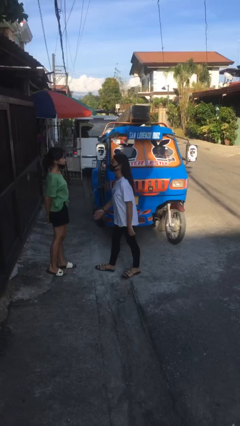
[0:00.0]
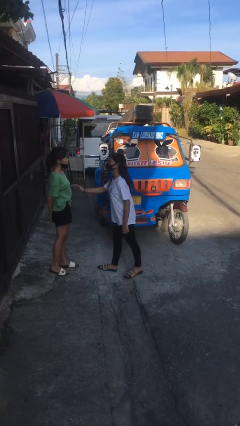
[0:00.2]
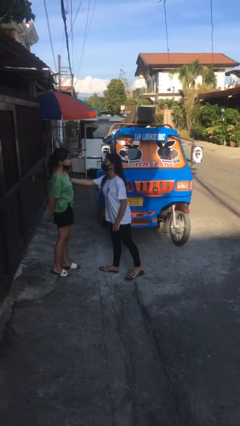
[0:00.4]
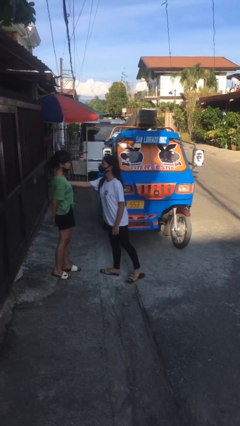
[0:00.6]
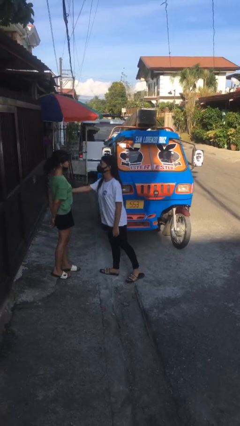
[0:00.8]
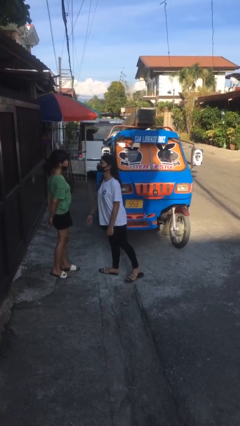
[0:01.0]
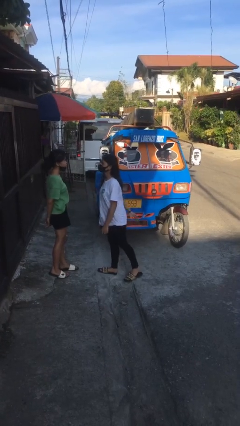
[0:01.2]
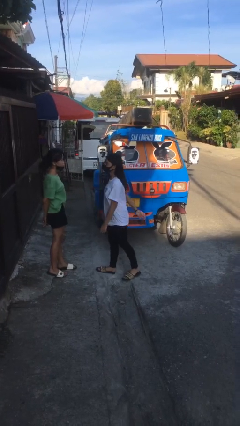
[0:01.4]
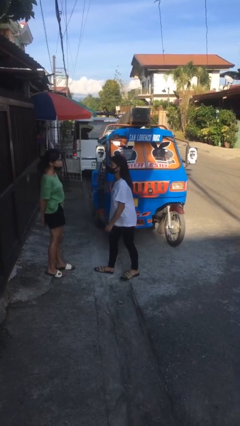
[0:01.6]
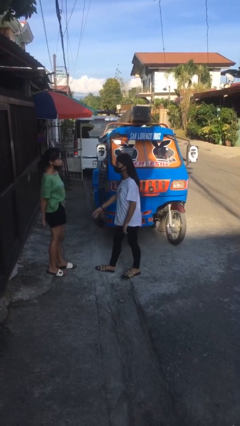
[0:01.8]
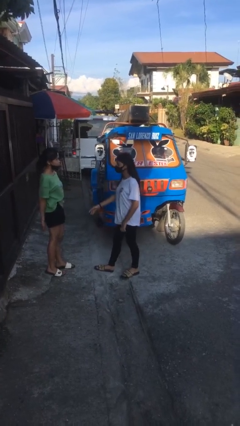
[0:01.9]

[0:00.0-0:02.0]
person shoves person

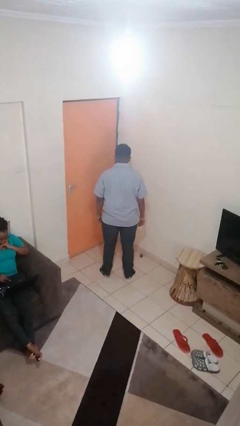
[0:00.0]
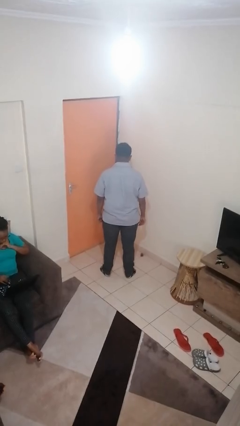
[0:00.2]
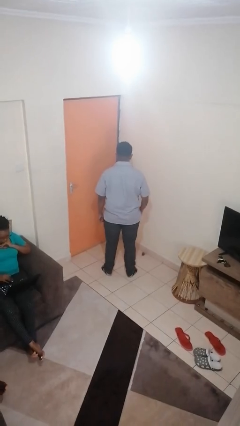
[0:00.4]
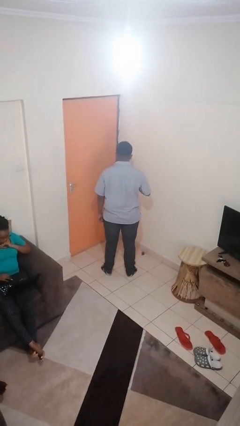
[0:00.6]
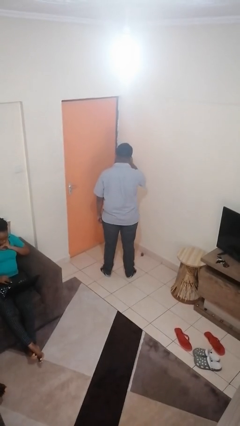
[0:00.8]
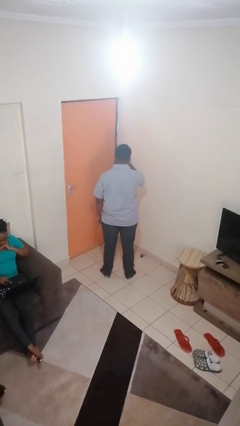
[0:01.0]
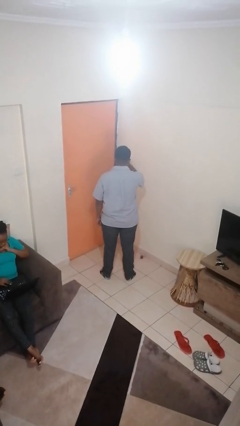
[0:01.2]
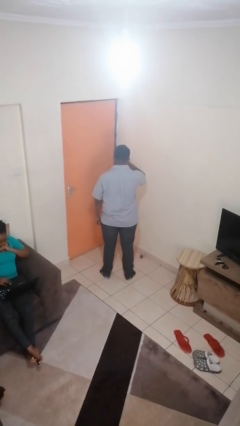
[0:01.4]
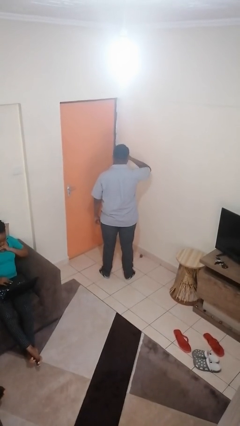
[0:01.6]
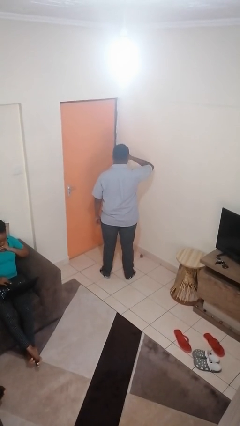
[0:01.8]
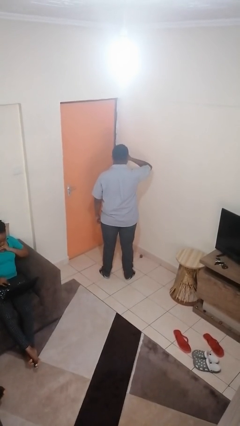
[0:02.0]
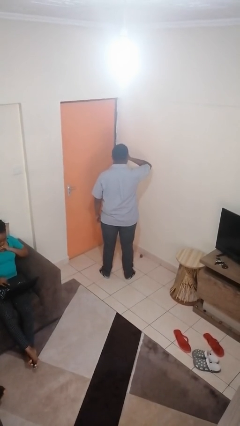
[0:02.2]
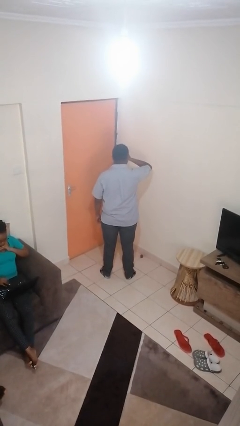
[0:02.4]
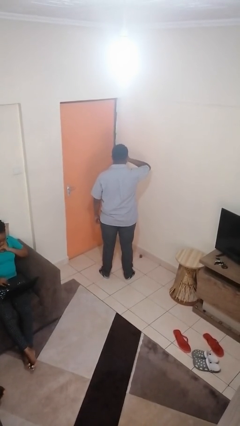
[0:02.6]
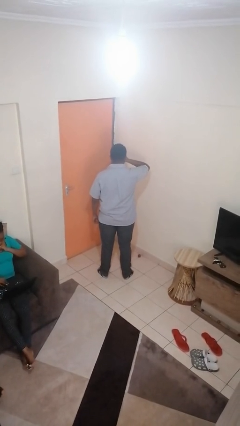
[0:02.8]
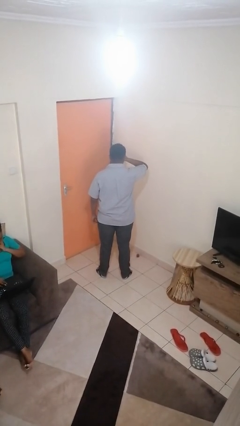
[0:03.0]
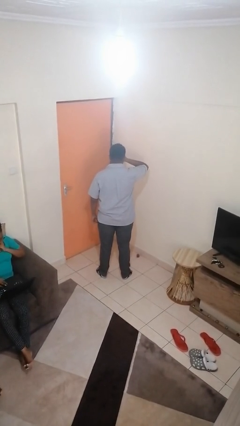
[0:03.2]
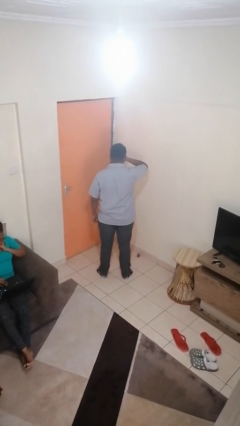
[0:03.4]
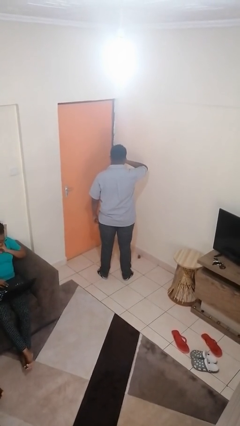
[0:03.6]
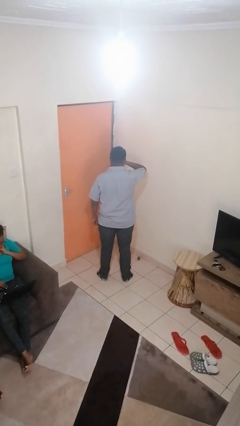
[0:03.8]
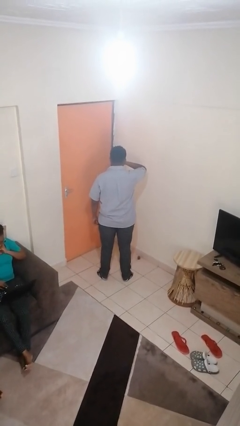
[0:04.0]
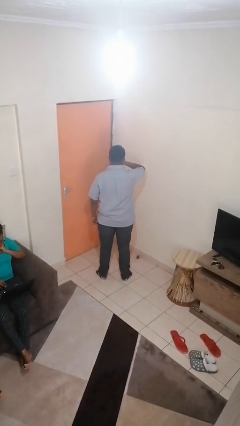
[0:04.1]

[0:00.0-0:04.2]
person scratches face

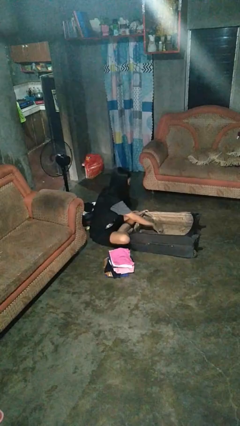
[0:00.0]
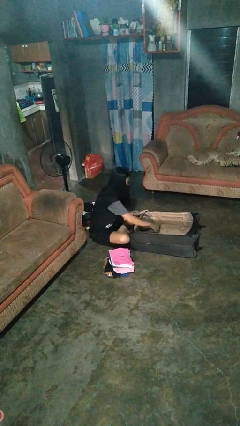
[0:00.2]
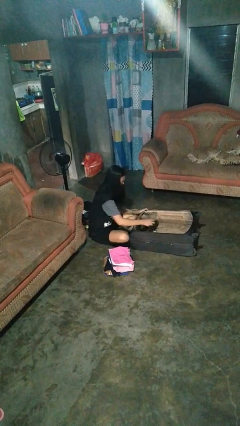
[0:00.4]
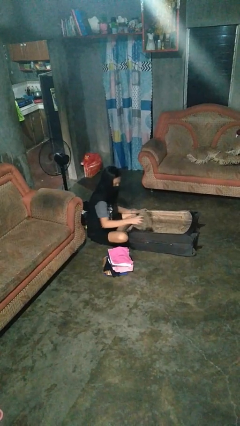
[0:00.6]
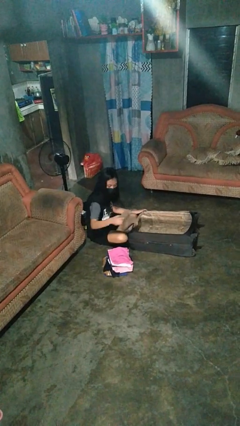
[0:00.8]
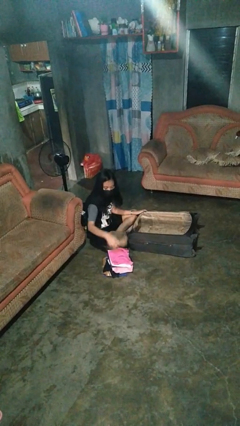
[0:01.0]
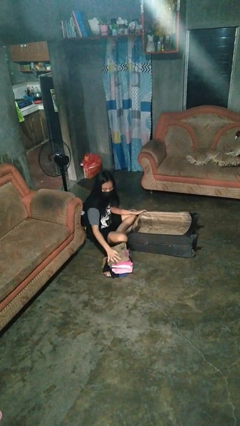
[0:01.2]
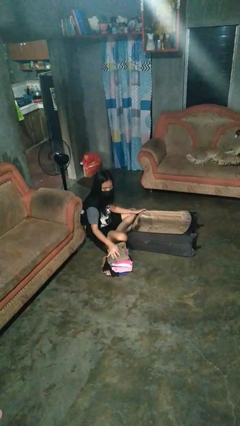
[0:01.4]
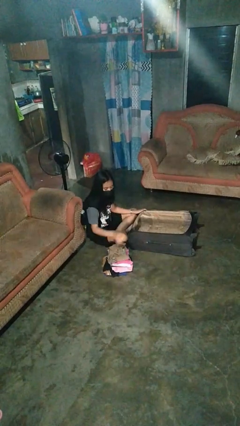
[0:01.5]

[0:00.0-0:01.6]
person unloads clothes from suitcase

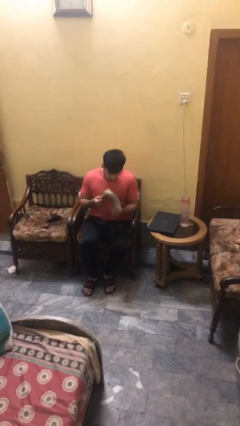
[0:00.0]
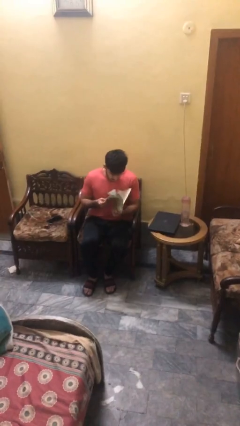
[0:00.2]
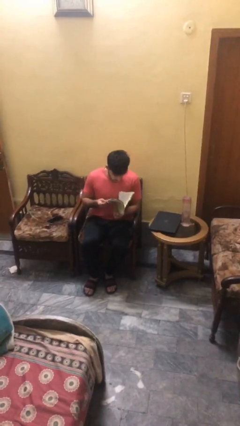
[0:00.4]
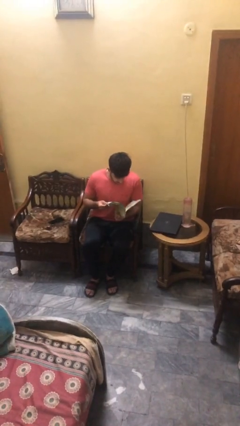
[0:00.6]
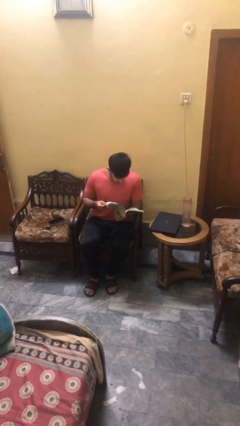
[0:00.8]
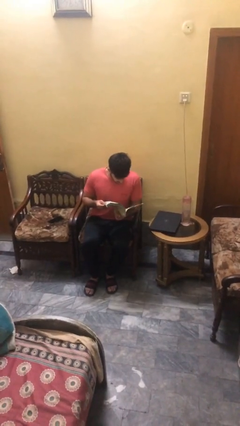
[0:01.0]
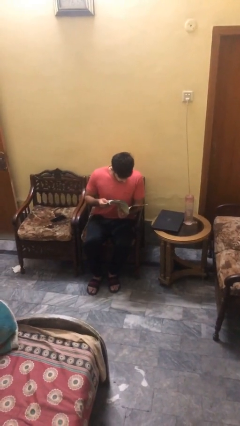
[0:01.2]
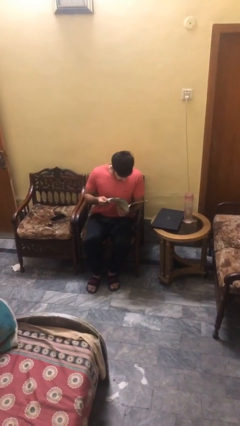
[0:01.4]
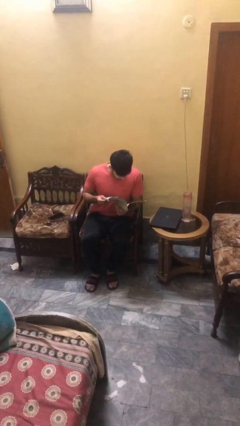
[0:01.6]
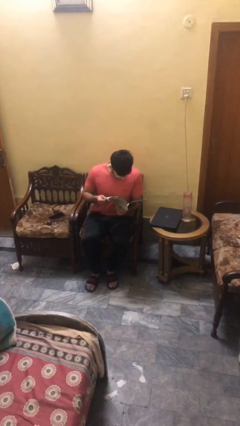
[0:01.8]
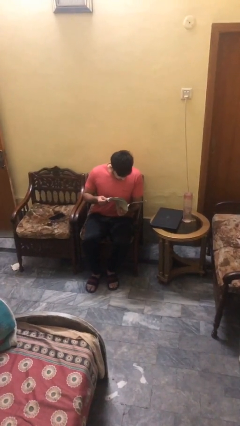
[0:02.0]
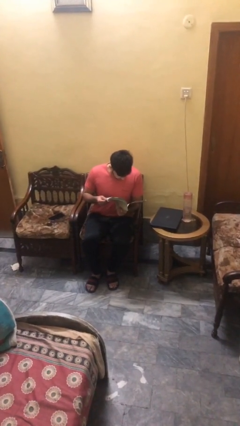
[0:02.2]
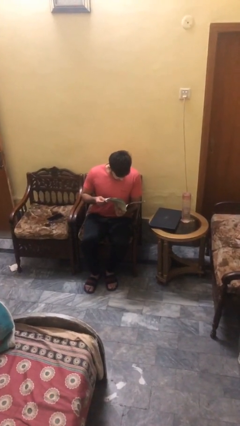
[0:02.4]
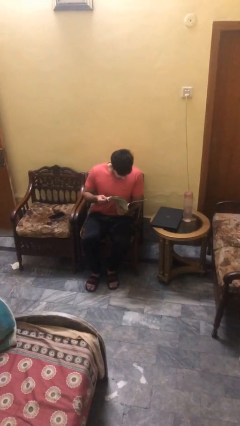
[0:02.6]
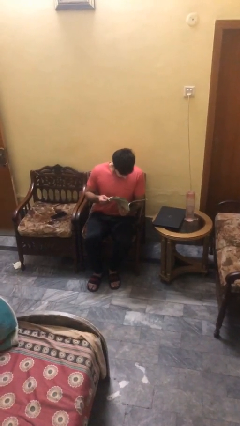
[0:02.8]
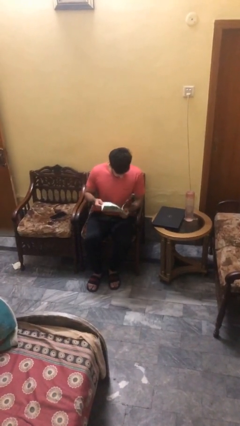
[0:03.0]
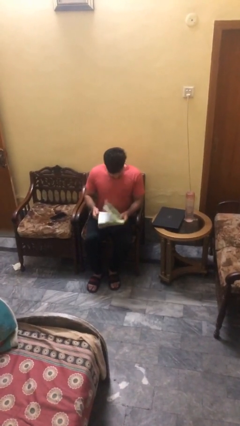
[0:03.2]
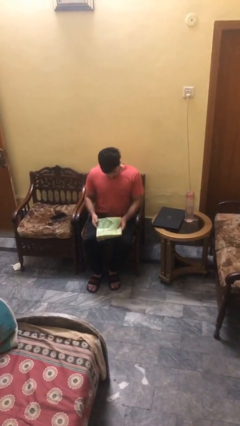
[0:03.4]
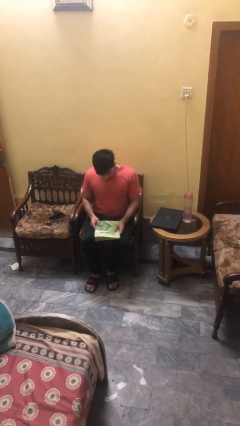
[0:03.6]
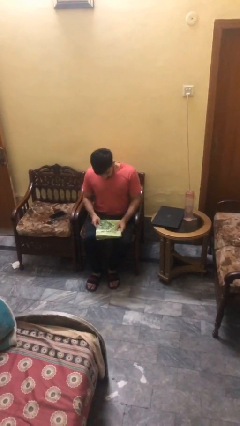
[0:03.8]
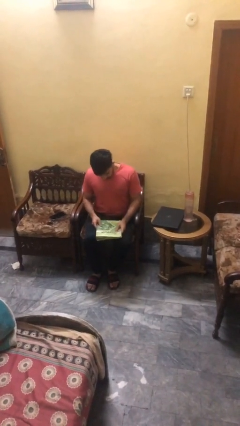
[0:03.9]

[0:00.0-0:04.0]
person reads document

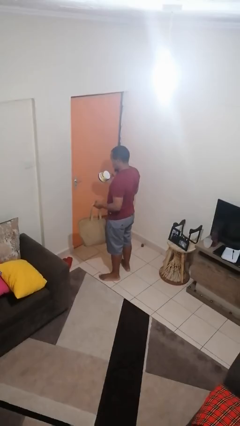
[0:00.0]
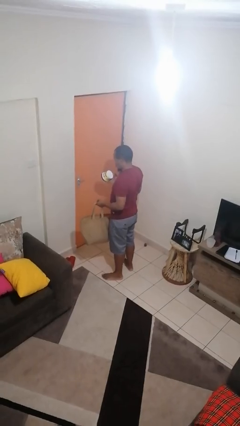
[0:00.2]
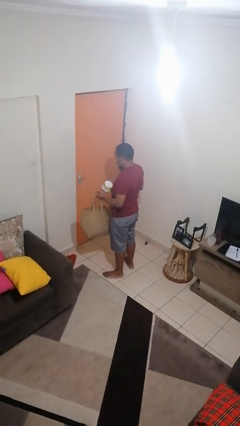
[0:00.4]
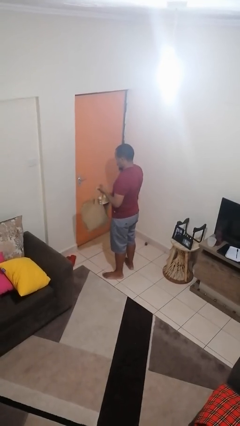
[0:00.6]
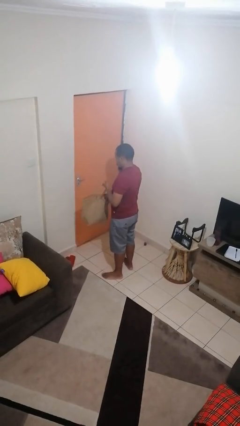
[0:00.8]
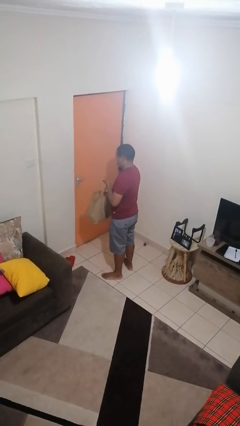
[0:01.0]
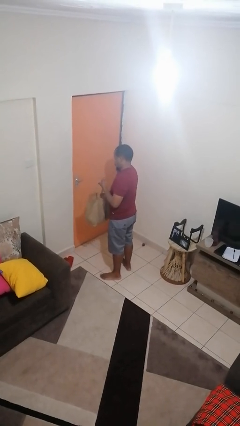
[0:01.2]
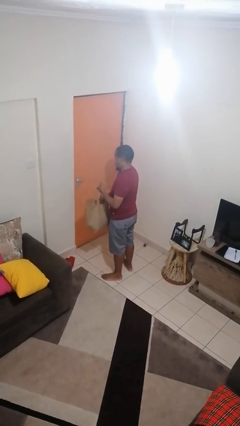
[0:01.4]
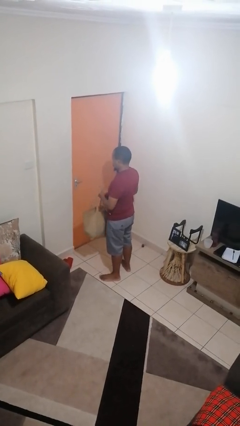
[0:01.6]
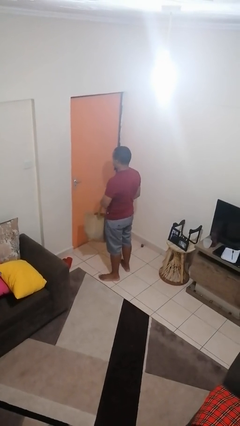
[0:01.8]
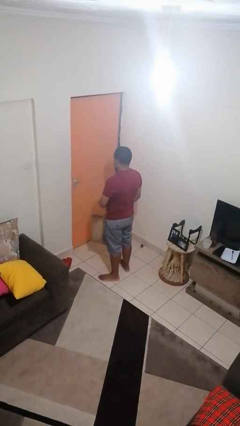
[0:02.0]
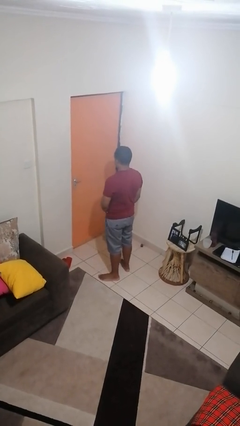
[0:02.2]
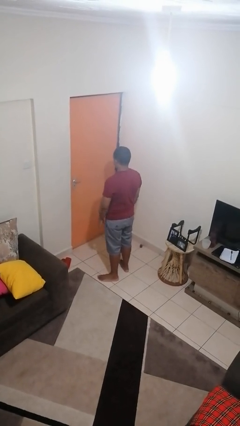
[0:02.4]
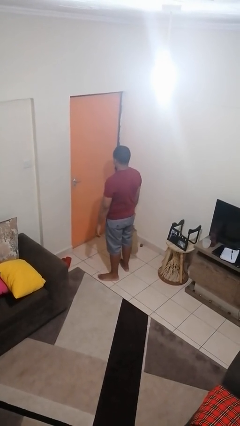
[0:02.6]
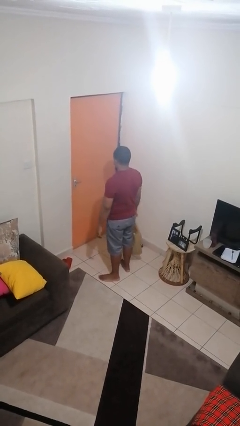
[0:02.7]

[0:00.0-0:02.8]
person puts object into bag

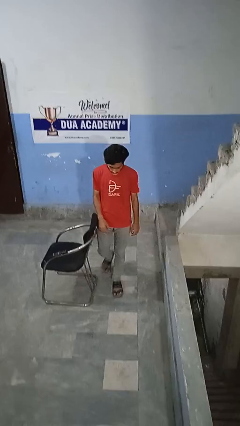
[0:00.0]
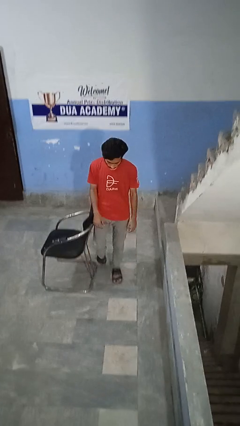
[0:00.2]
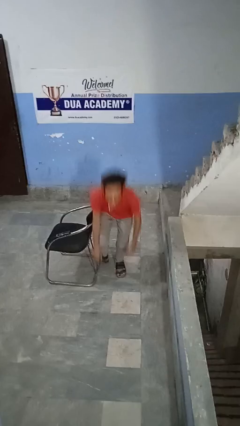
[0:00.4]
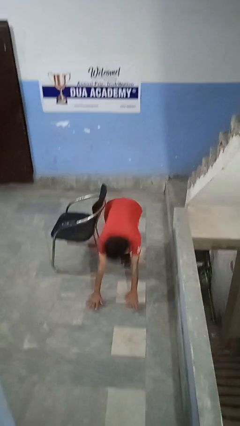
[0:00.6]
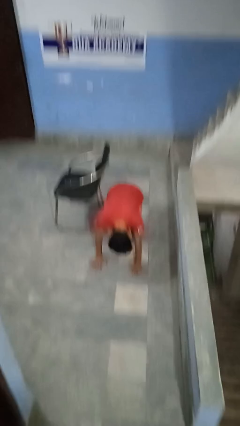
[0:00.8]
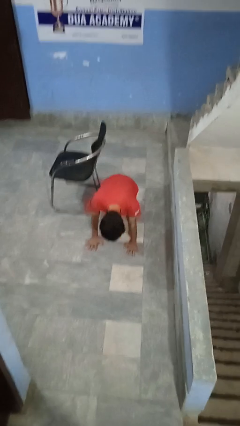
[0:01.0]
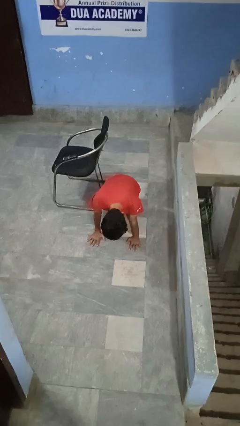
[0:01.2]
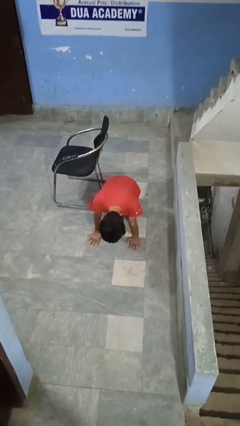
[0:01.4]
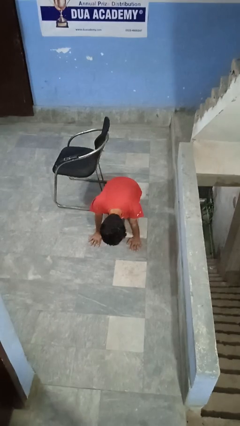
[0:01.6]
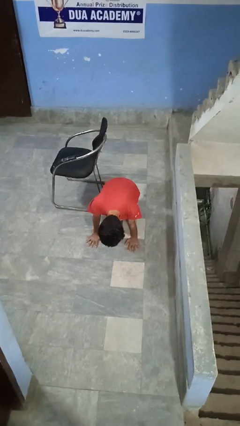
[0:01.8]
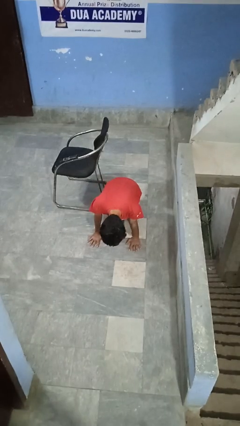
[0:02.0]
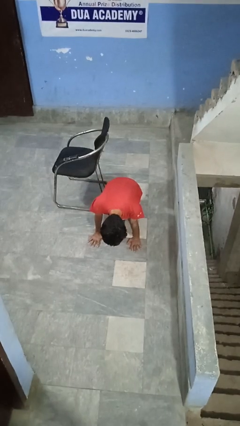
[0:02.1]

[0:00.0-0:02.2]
person trips on object on floor

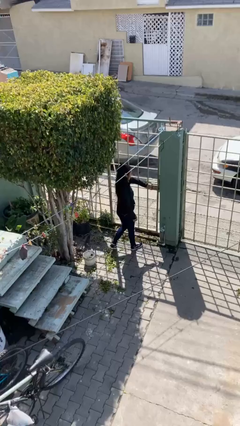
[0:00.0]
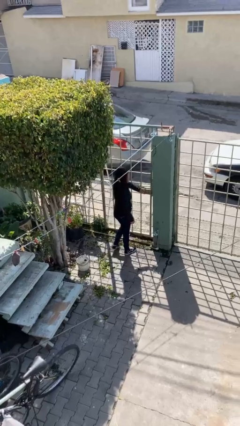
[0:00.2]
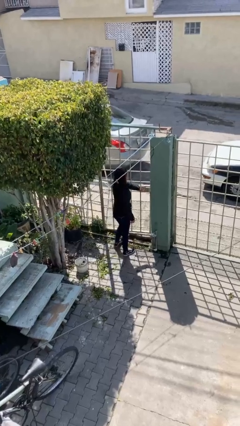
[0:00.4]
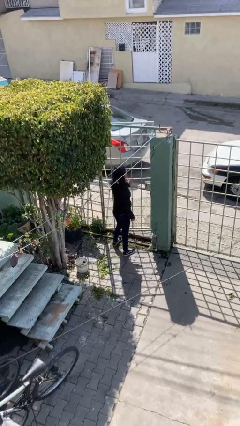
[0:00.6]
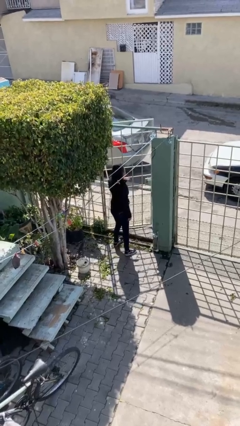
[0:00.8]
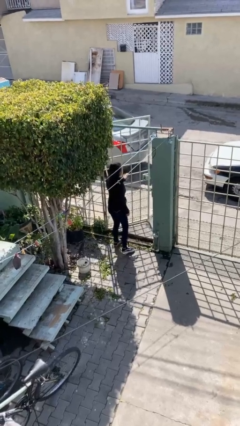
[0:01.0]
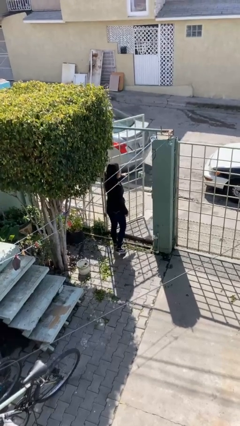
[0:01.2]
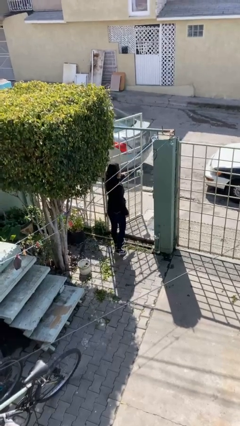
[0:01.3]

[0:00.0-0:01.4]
person opens facility door
